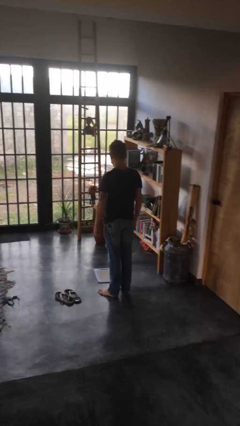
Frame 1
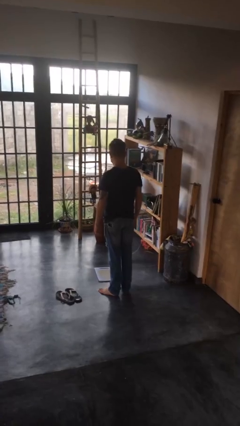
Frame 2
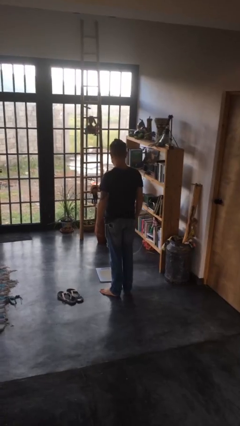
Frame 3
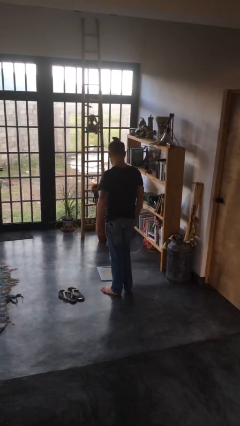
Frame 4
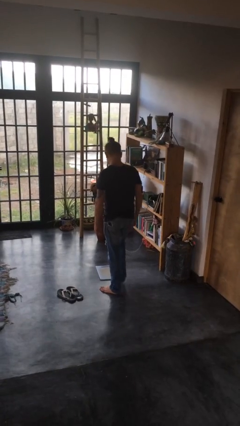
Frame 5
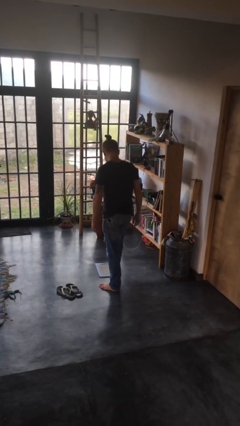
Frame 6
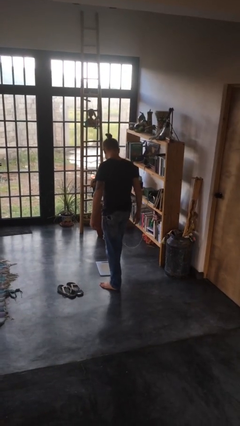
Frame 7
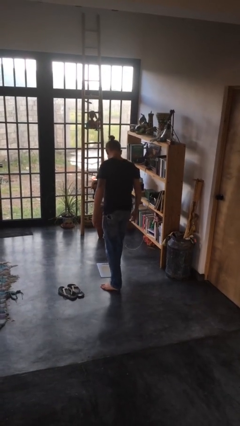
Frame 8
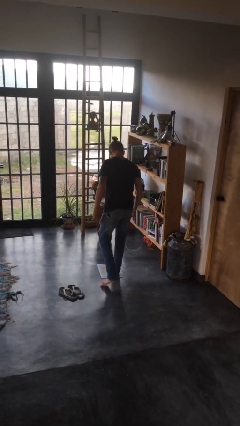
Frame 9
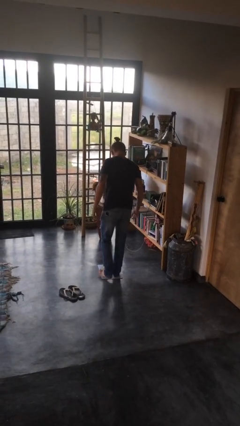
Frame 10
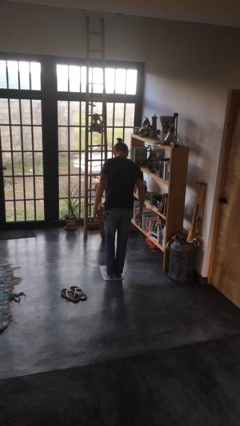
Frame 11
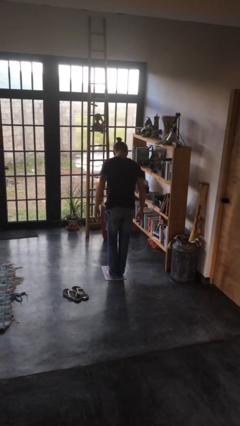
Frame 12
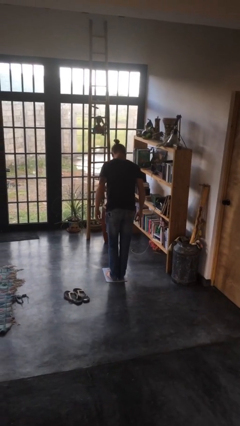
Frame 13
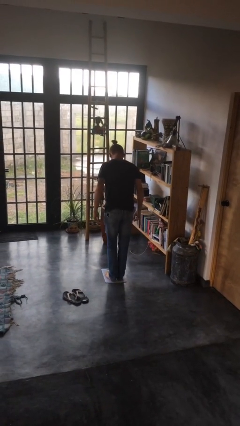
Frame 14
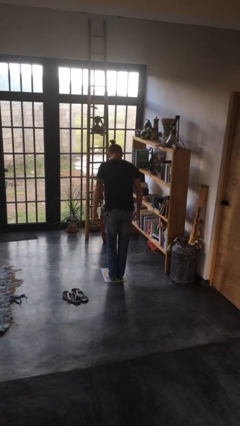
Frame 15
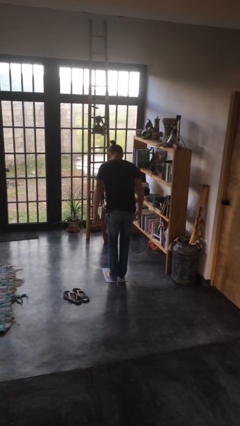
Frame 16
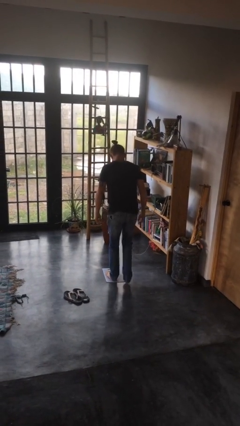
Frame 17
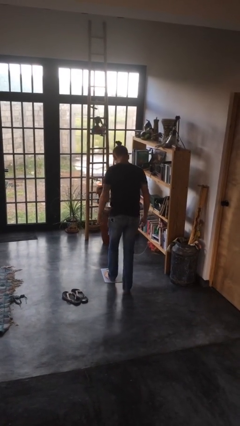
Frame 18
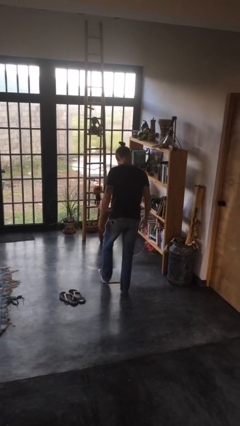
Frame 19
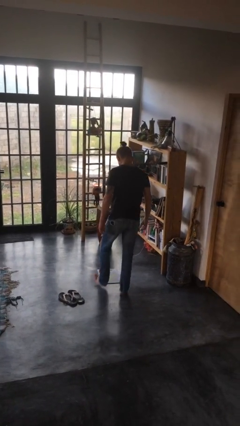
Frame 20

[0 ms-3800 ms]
person uses bodyweight scale

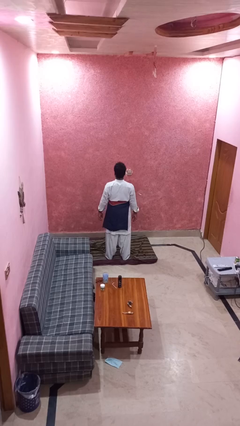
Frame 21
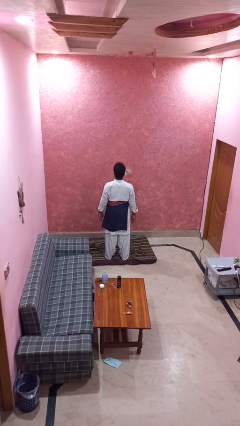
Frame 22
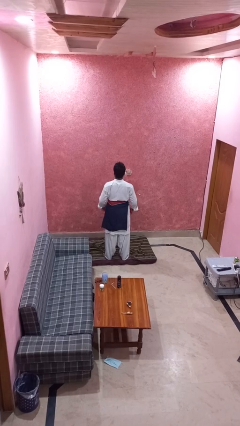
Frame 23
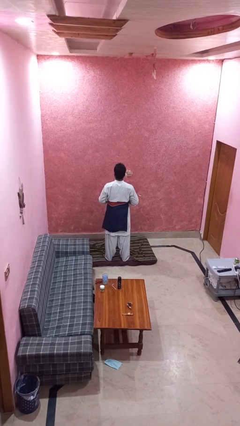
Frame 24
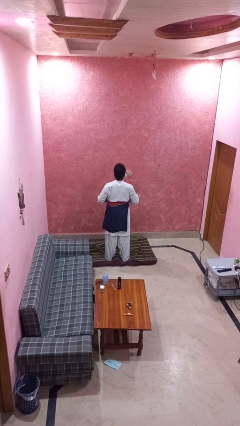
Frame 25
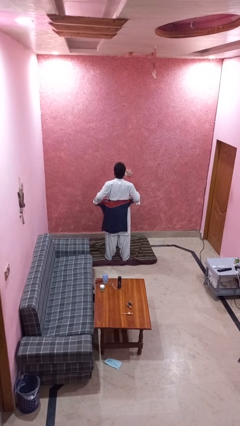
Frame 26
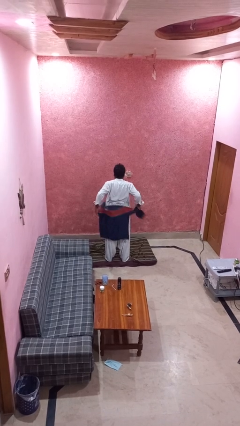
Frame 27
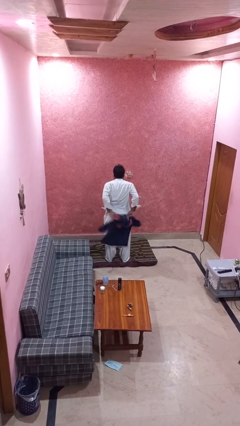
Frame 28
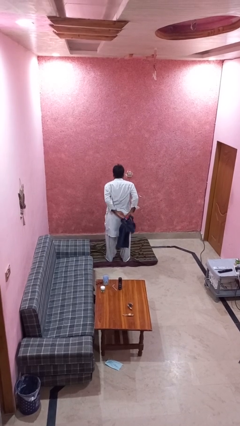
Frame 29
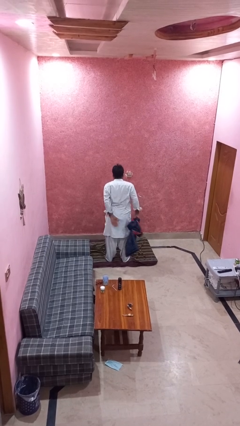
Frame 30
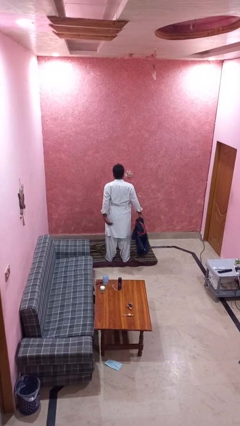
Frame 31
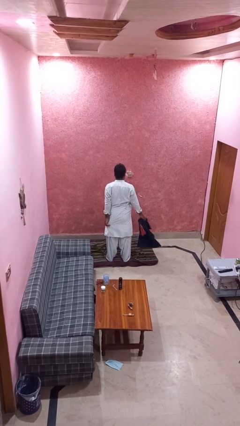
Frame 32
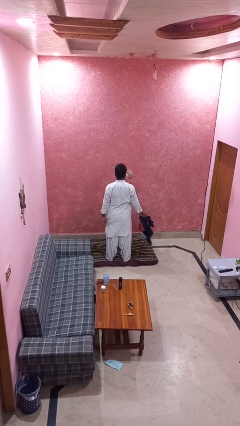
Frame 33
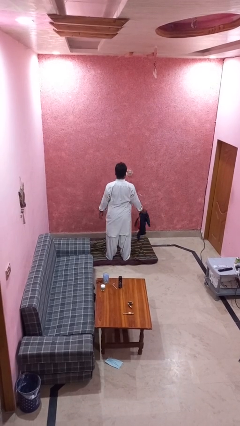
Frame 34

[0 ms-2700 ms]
person unties jacket around waist

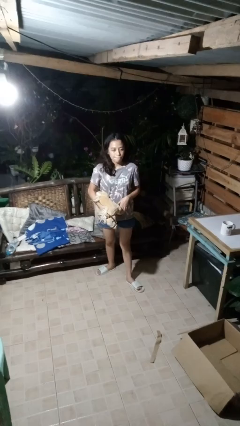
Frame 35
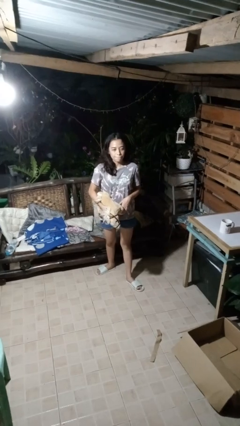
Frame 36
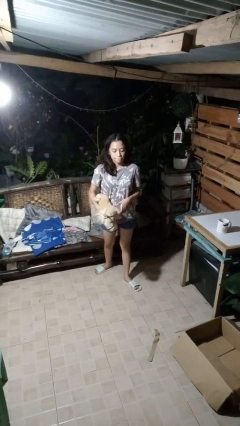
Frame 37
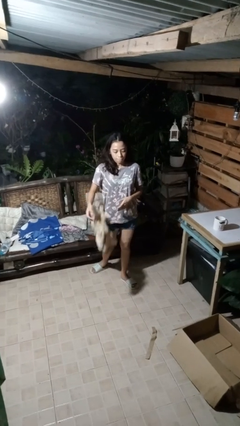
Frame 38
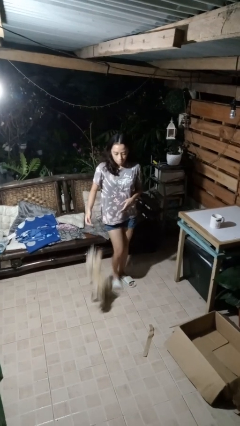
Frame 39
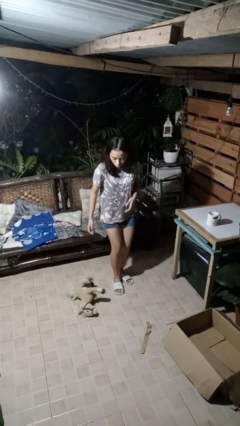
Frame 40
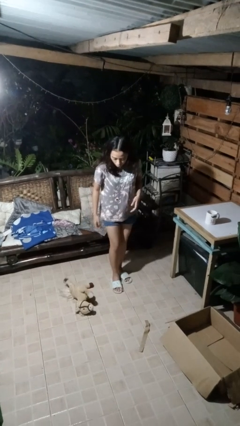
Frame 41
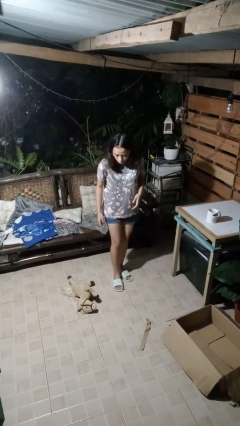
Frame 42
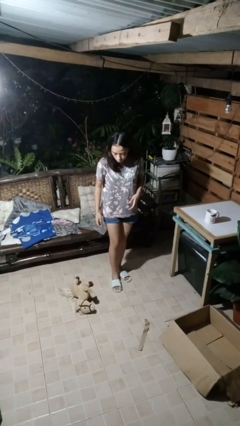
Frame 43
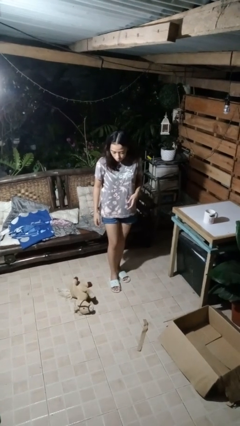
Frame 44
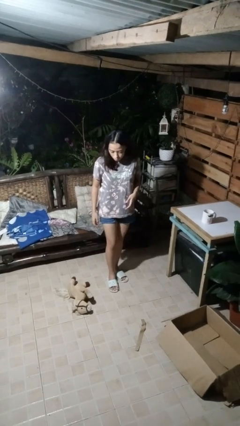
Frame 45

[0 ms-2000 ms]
person drops object

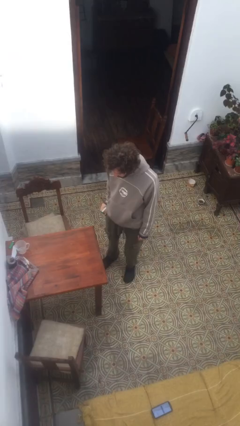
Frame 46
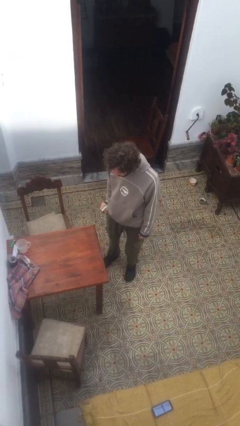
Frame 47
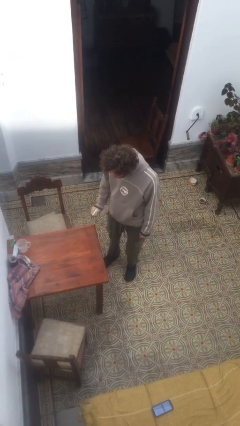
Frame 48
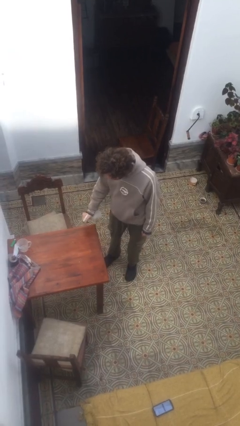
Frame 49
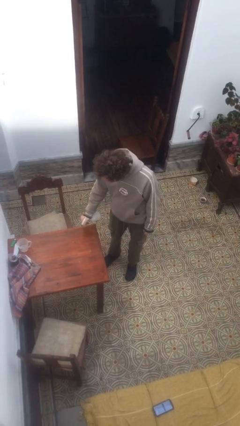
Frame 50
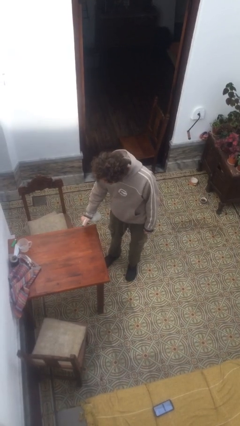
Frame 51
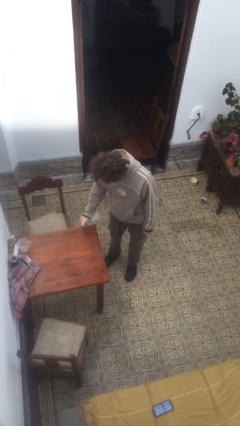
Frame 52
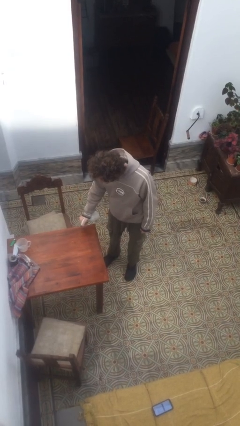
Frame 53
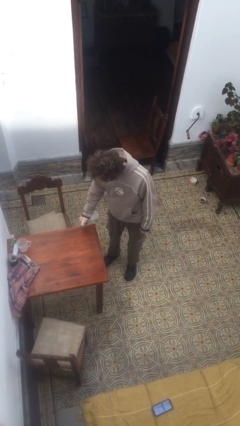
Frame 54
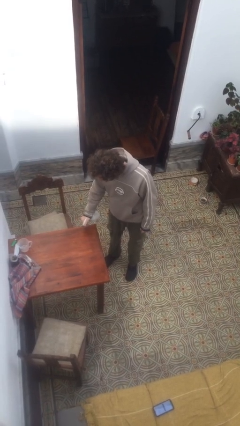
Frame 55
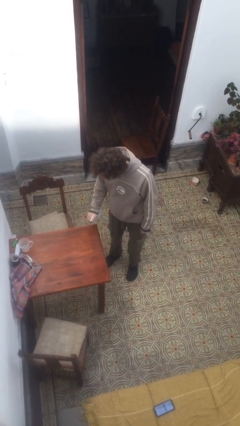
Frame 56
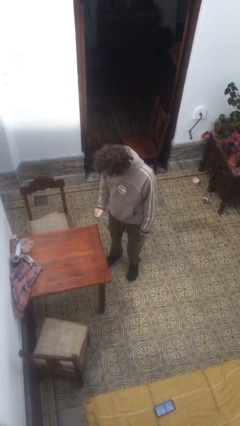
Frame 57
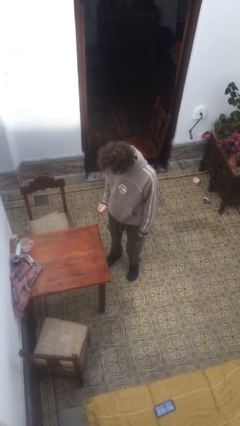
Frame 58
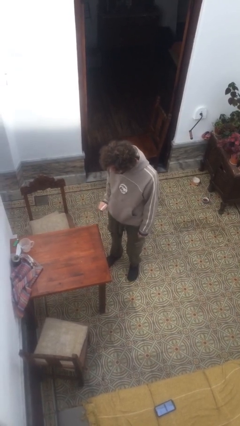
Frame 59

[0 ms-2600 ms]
person sprays from bottle

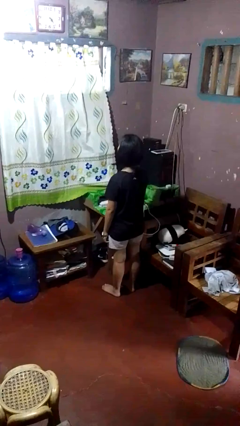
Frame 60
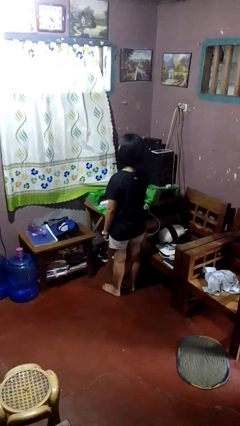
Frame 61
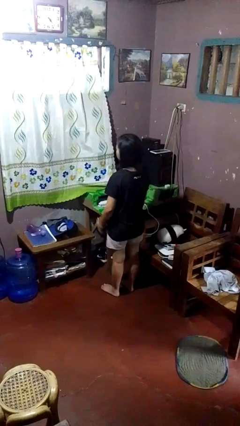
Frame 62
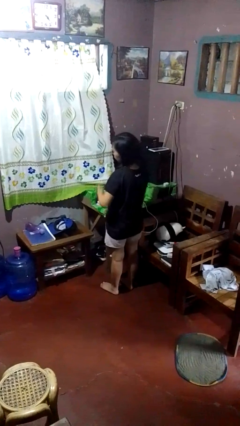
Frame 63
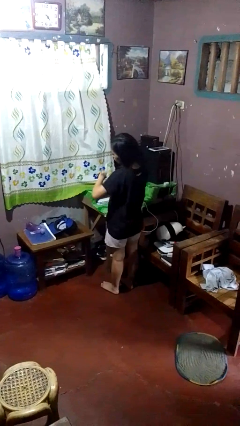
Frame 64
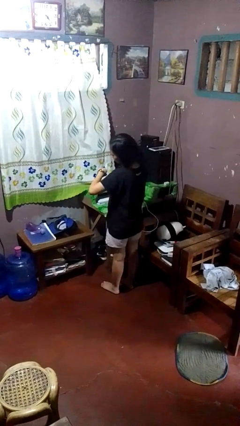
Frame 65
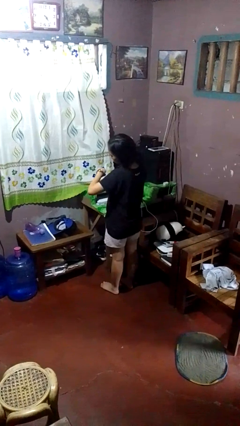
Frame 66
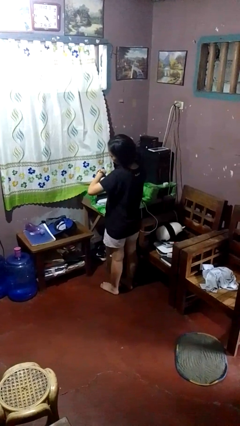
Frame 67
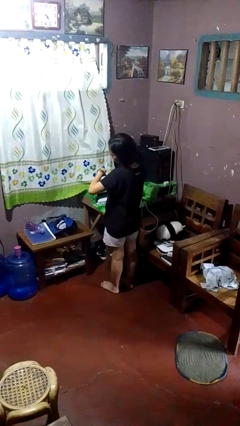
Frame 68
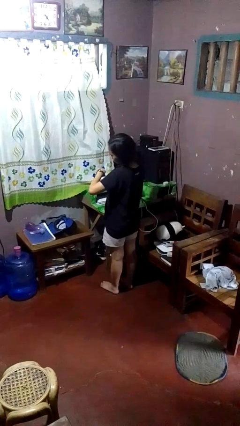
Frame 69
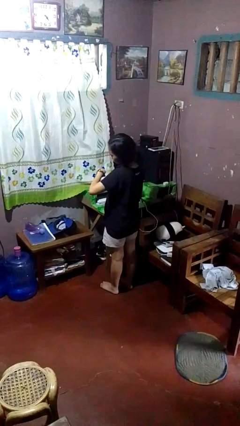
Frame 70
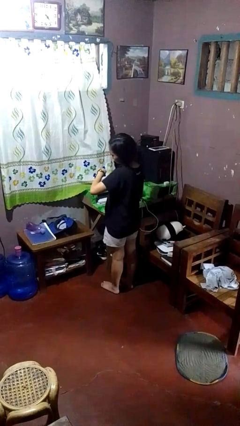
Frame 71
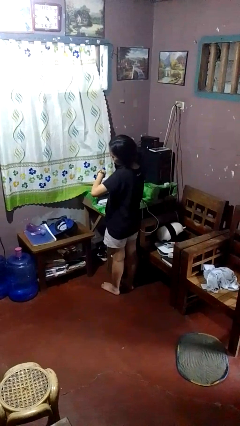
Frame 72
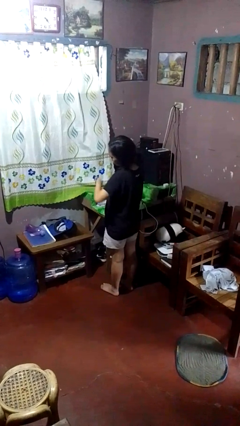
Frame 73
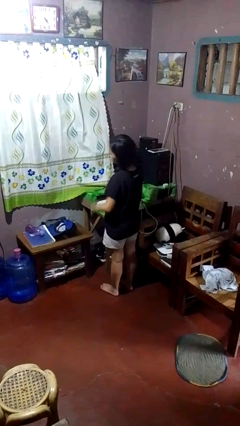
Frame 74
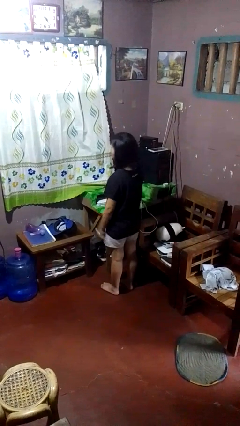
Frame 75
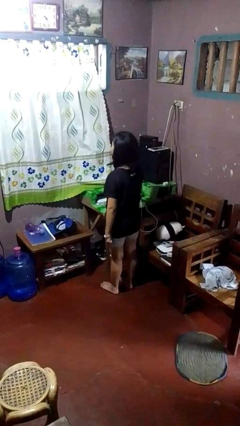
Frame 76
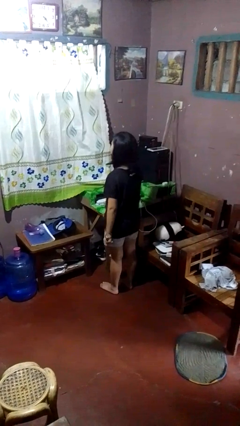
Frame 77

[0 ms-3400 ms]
person looks at wristwatch

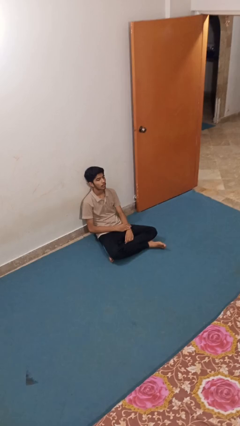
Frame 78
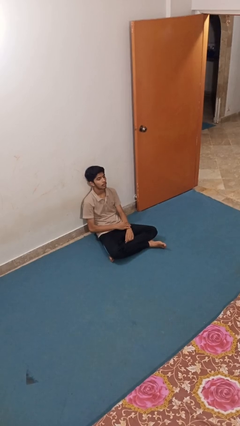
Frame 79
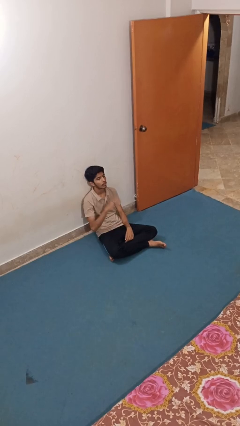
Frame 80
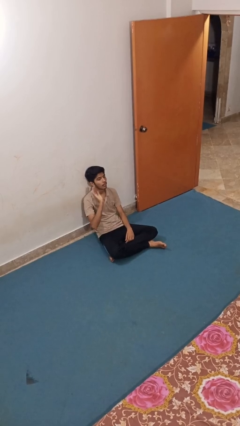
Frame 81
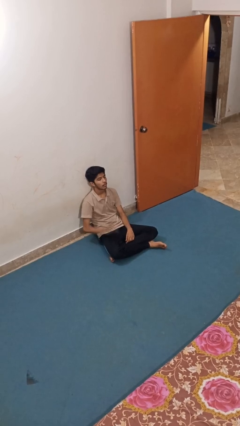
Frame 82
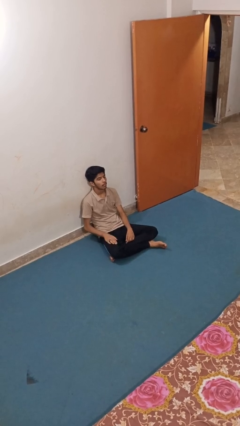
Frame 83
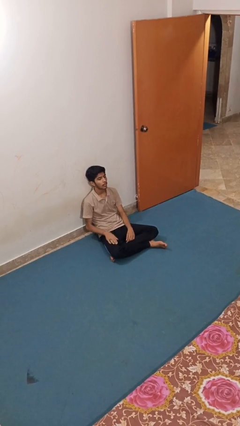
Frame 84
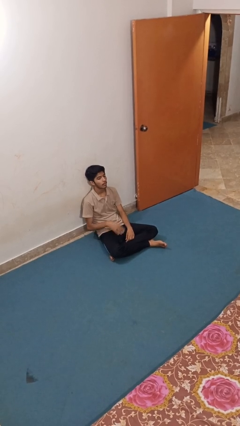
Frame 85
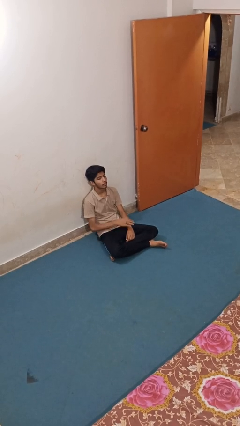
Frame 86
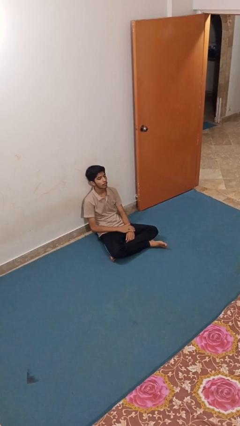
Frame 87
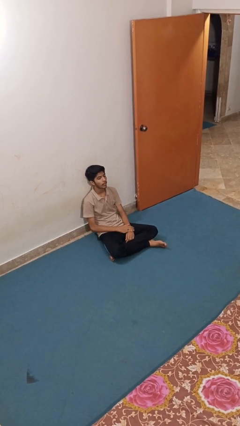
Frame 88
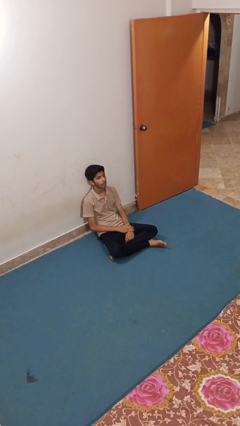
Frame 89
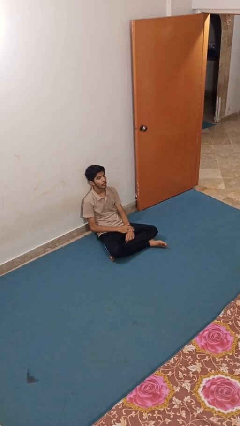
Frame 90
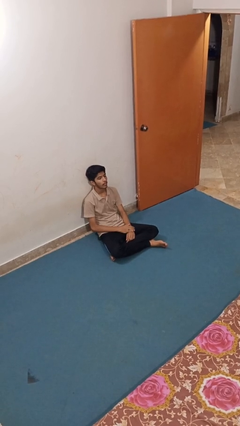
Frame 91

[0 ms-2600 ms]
person slaps hands on thighs

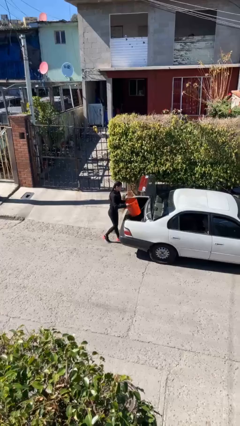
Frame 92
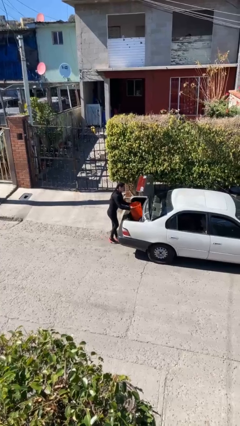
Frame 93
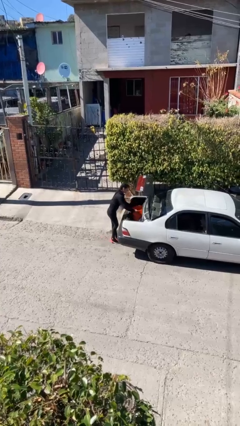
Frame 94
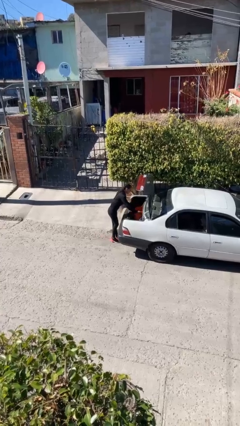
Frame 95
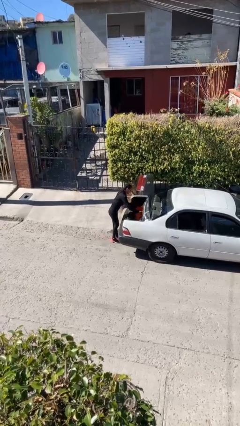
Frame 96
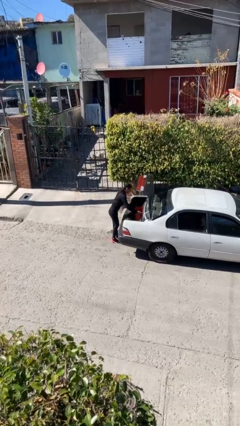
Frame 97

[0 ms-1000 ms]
person loads car
